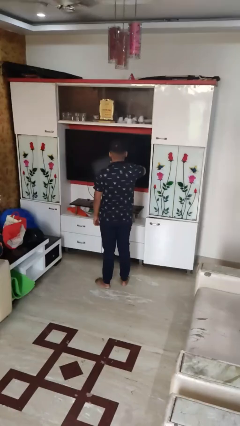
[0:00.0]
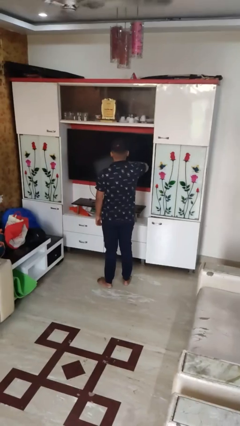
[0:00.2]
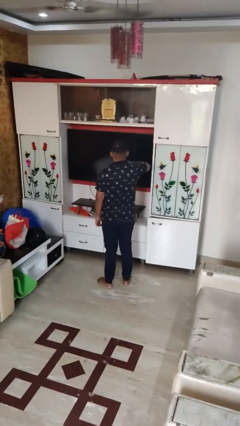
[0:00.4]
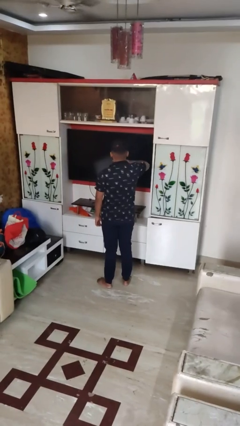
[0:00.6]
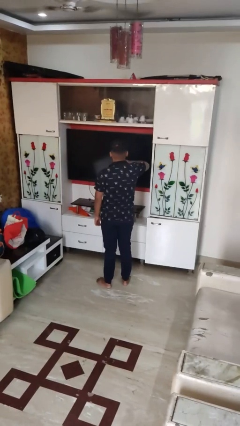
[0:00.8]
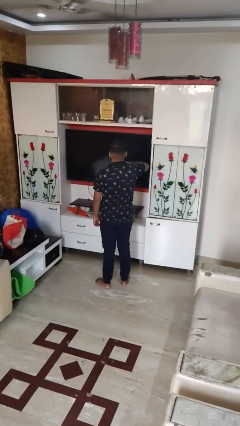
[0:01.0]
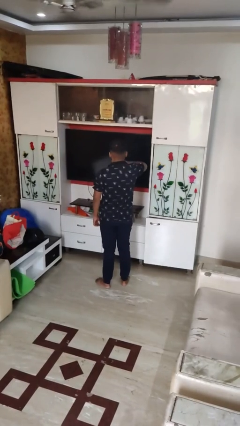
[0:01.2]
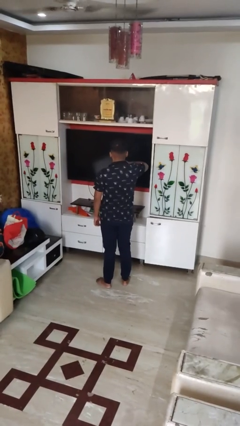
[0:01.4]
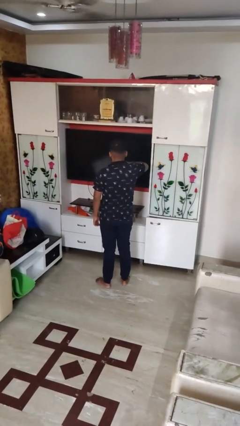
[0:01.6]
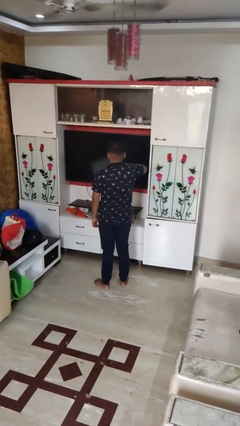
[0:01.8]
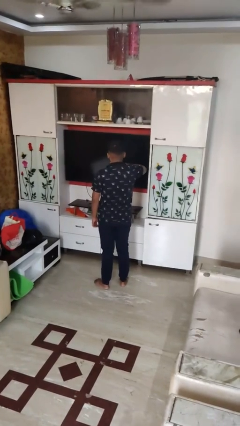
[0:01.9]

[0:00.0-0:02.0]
person strokes chin

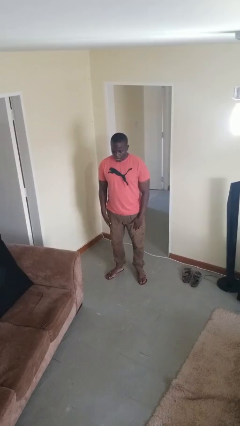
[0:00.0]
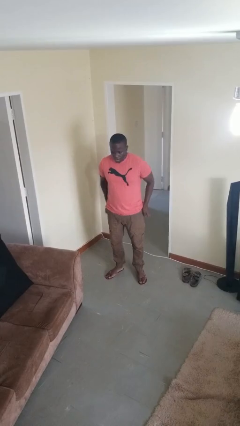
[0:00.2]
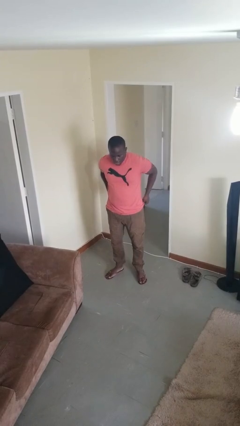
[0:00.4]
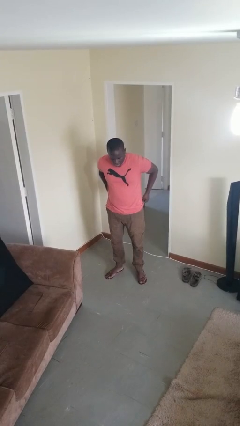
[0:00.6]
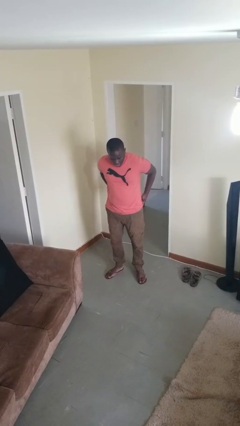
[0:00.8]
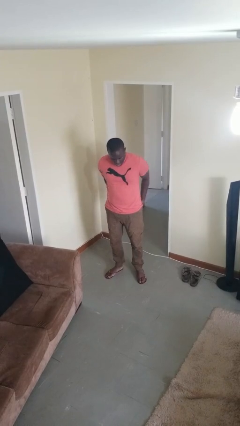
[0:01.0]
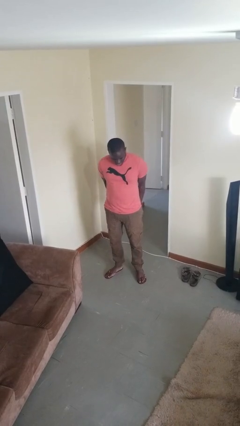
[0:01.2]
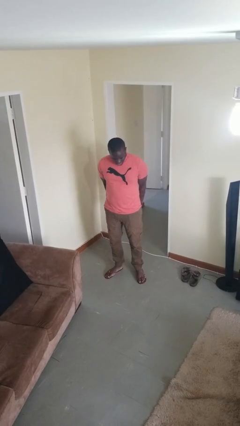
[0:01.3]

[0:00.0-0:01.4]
person puts hands in back pockets

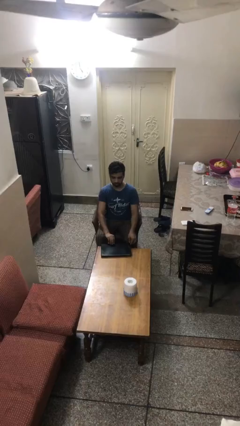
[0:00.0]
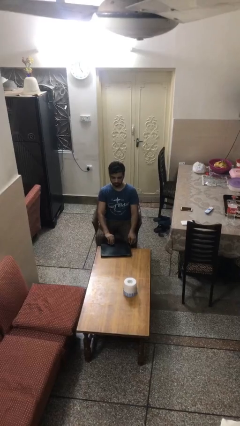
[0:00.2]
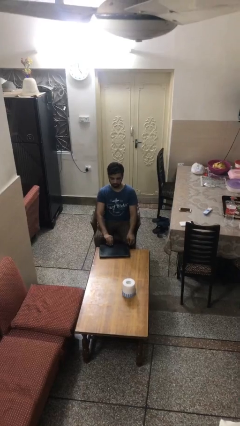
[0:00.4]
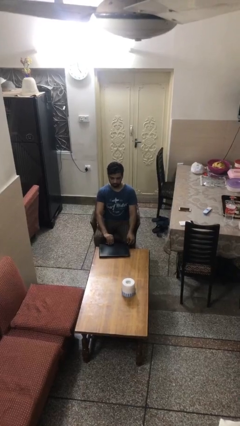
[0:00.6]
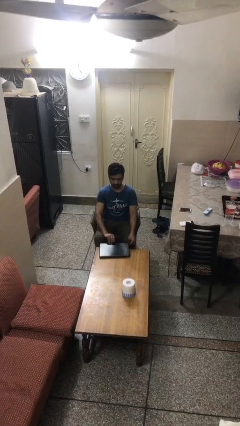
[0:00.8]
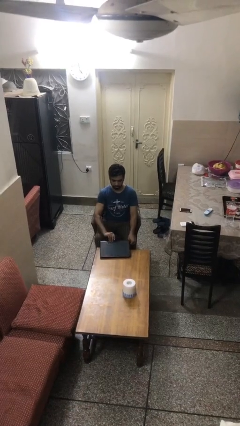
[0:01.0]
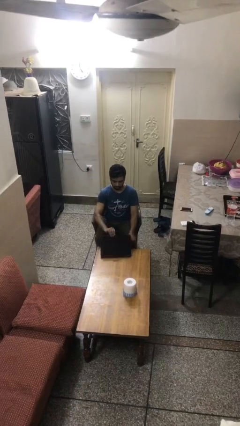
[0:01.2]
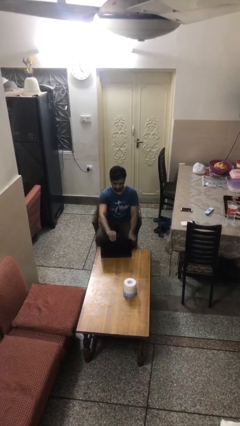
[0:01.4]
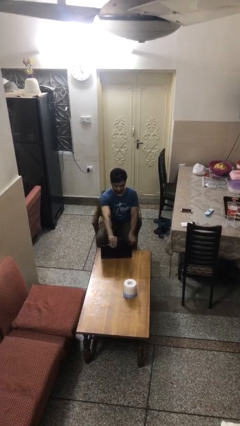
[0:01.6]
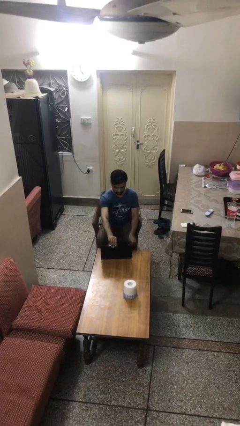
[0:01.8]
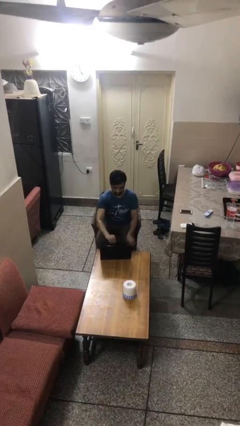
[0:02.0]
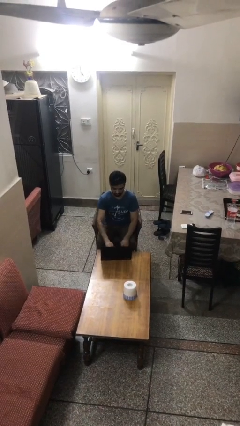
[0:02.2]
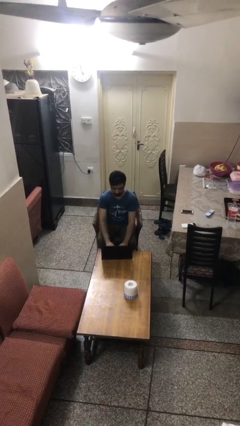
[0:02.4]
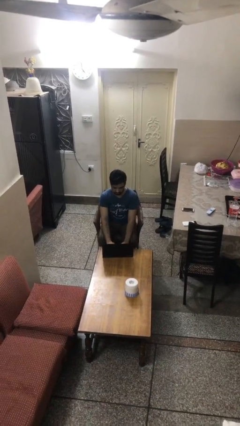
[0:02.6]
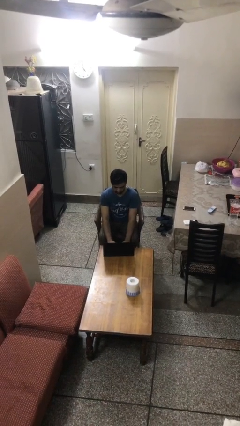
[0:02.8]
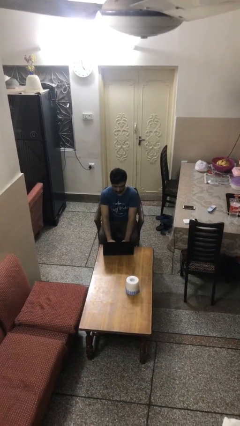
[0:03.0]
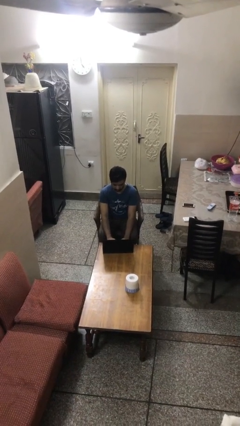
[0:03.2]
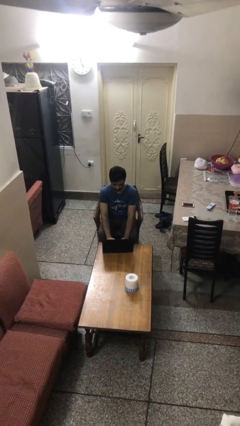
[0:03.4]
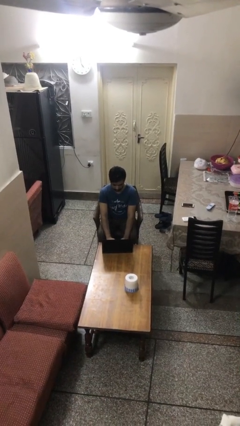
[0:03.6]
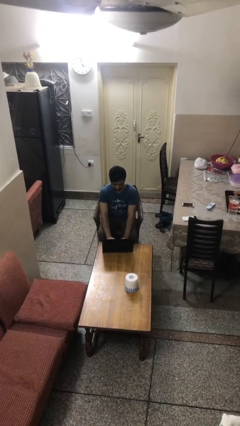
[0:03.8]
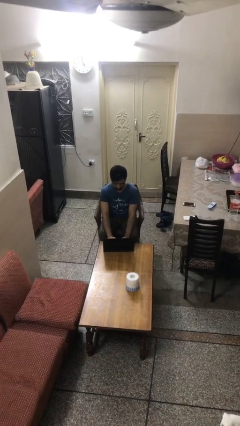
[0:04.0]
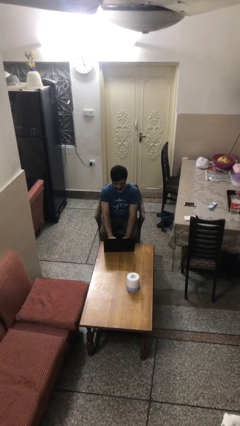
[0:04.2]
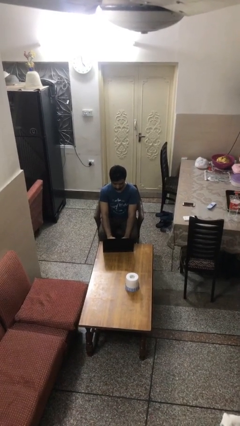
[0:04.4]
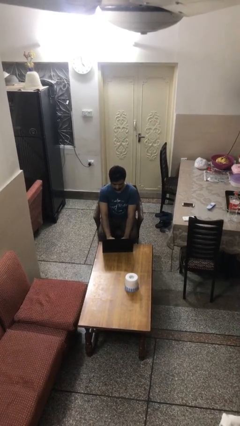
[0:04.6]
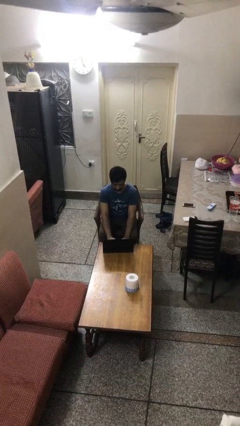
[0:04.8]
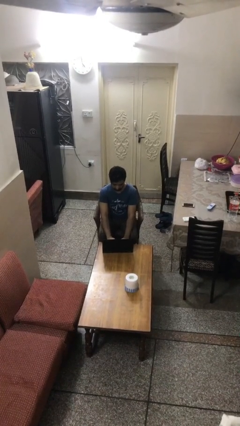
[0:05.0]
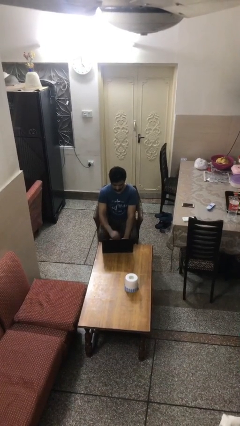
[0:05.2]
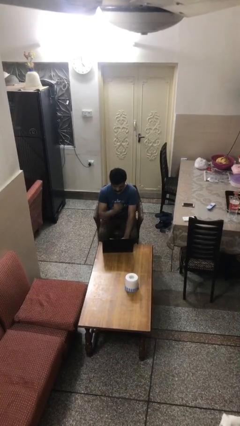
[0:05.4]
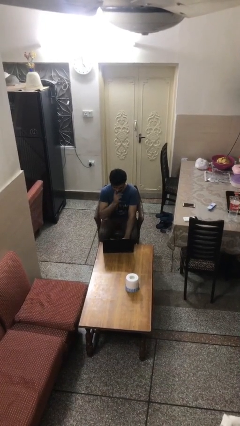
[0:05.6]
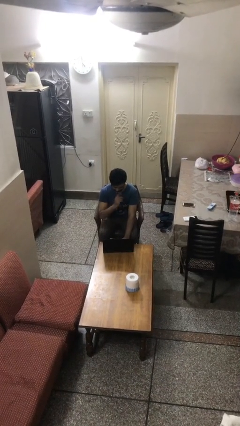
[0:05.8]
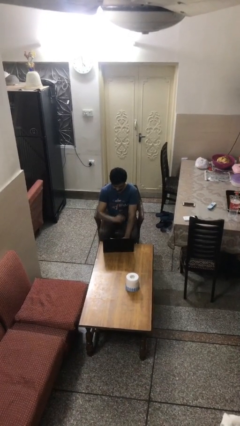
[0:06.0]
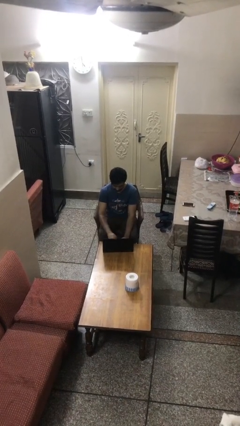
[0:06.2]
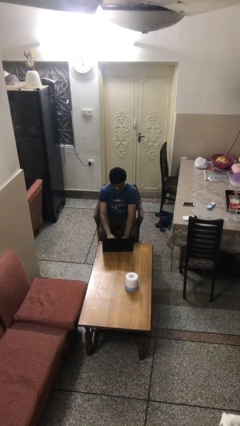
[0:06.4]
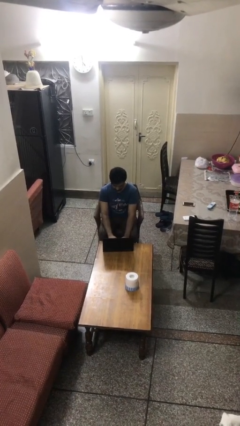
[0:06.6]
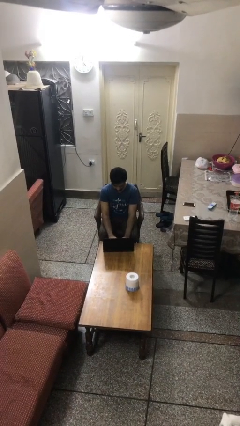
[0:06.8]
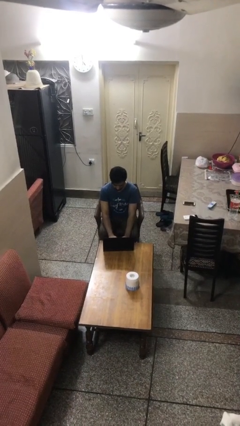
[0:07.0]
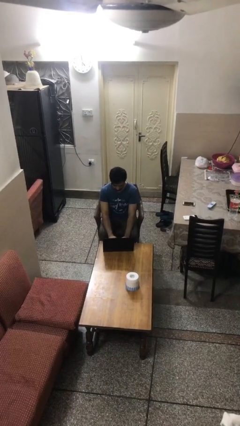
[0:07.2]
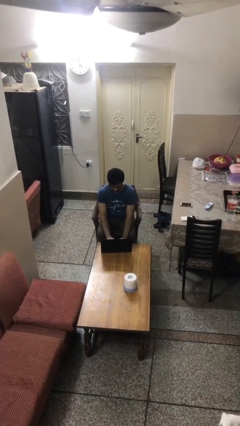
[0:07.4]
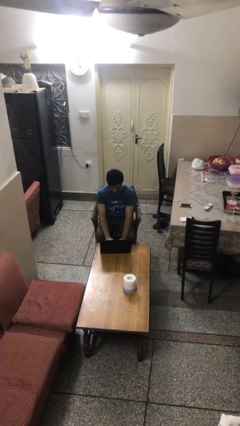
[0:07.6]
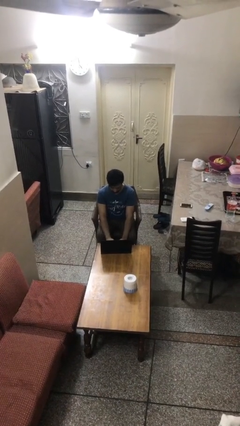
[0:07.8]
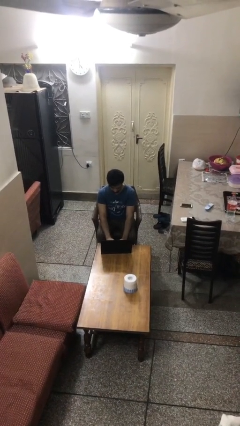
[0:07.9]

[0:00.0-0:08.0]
person interacts with laptop

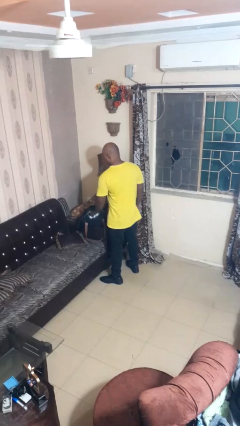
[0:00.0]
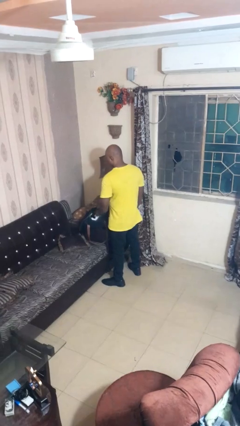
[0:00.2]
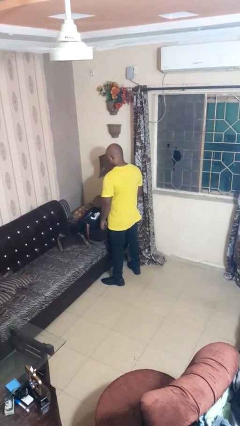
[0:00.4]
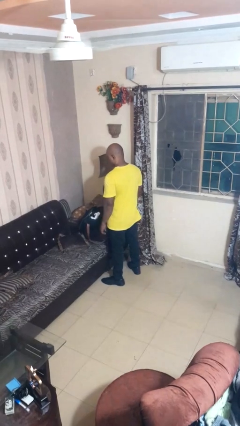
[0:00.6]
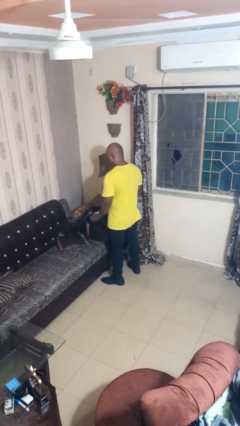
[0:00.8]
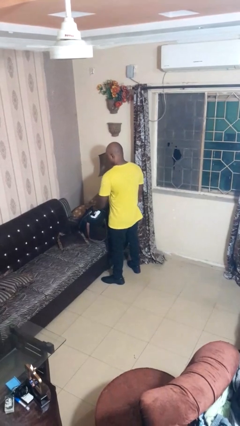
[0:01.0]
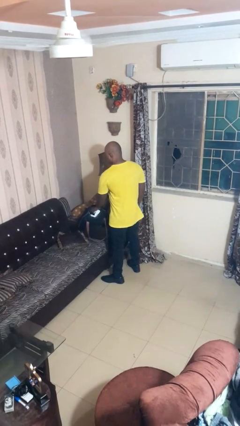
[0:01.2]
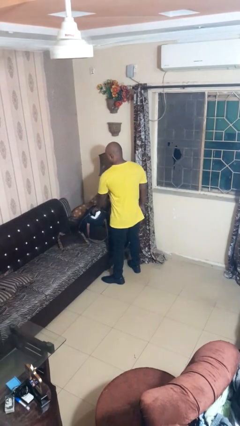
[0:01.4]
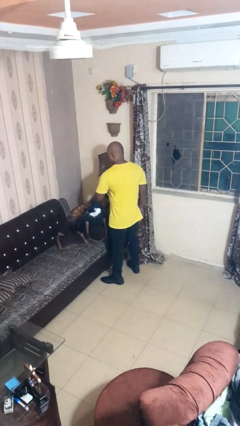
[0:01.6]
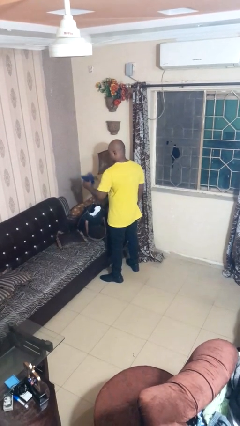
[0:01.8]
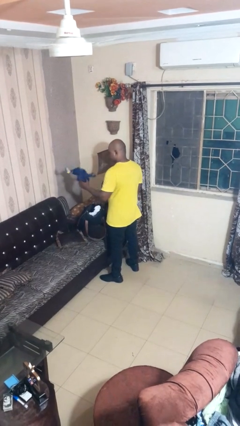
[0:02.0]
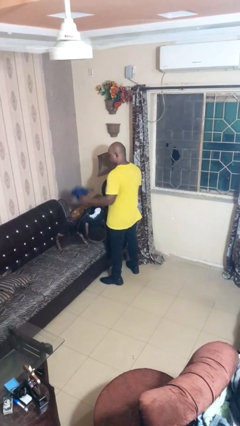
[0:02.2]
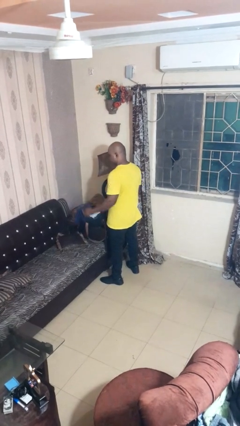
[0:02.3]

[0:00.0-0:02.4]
person takes object from bag

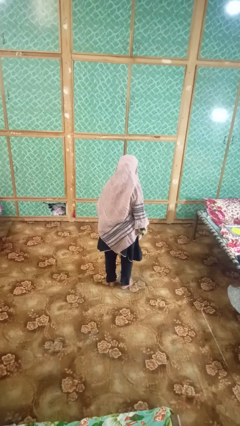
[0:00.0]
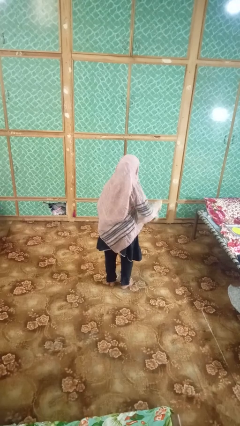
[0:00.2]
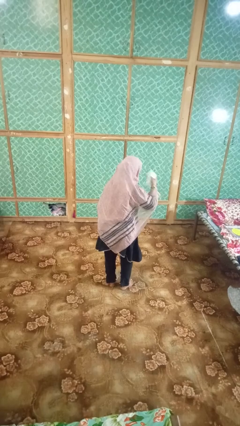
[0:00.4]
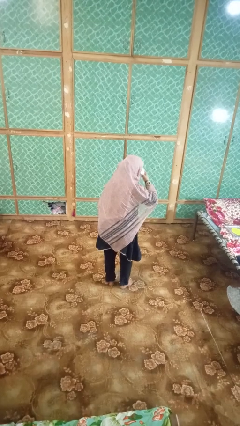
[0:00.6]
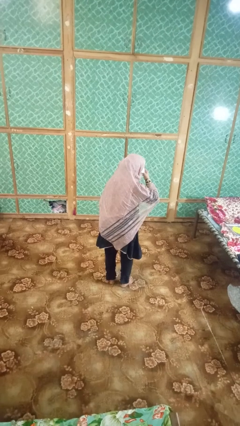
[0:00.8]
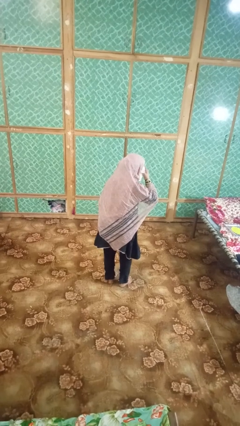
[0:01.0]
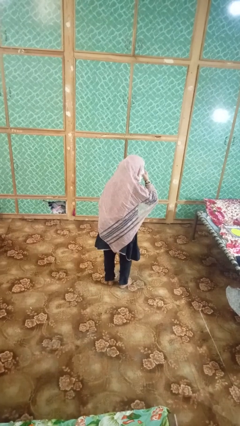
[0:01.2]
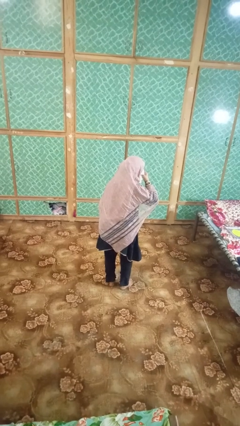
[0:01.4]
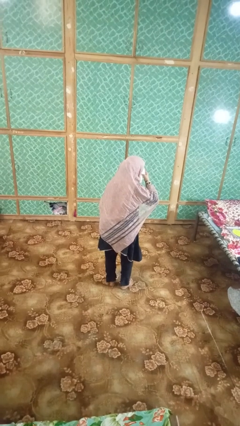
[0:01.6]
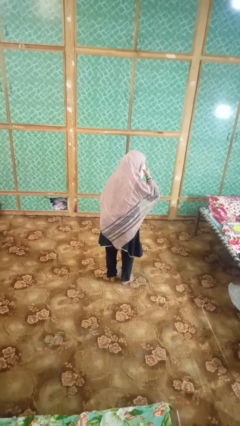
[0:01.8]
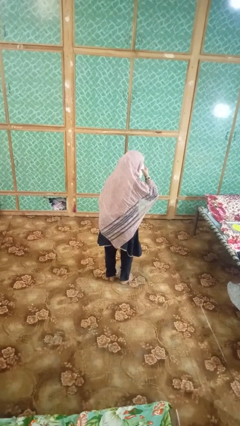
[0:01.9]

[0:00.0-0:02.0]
person blows nose

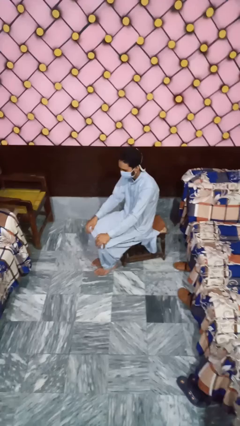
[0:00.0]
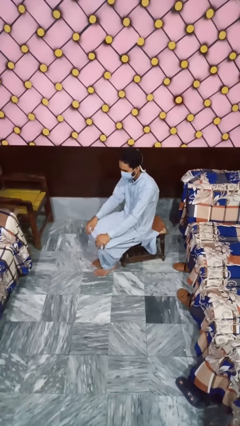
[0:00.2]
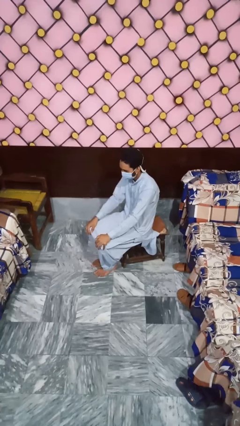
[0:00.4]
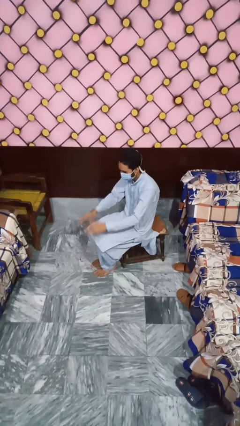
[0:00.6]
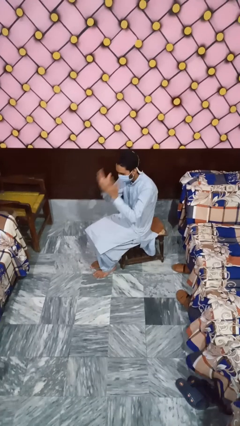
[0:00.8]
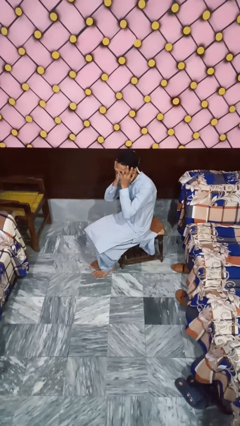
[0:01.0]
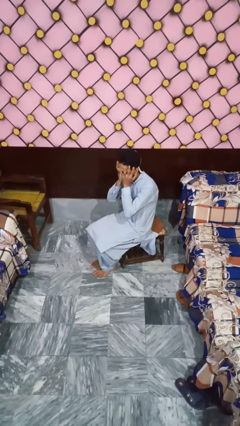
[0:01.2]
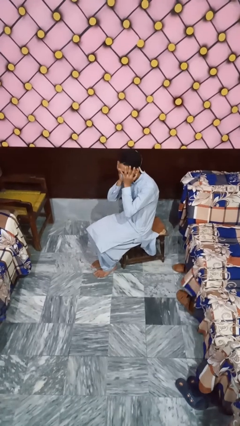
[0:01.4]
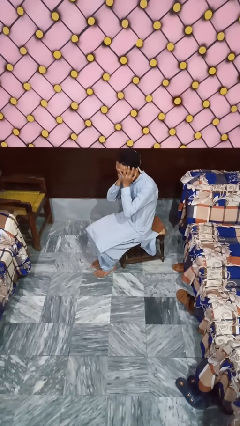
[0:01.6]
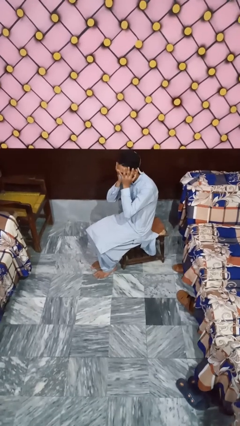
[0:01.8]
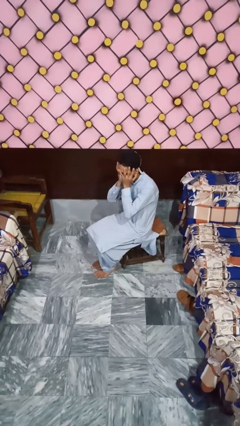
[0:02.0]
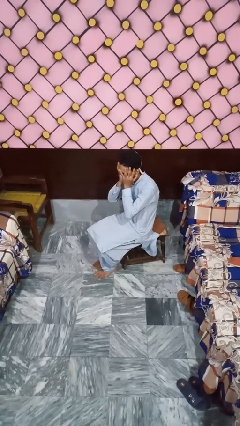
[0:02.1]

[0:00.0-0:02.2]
person covers face with hands
